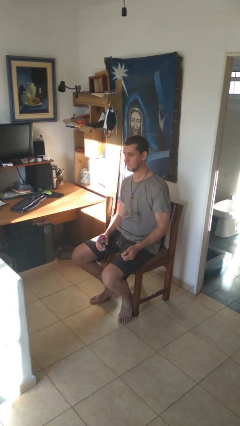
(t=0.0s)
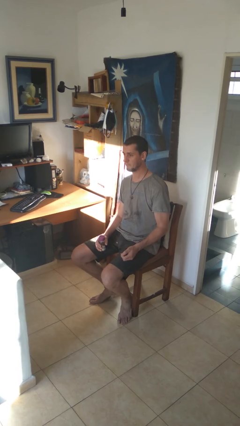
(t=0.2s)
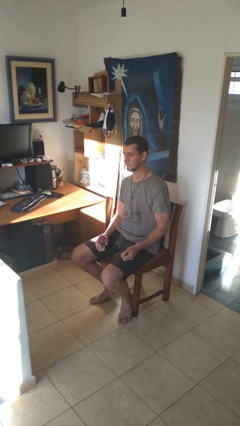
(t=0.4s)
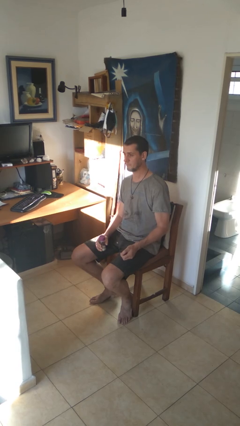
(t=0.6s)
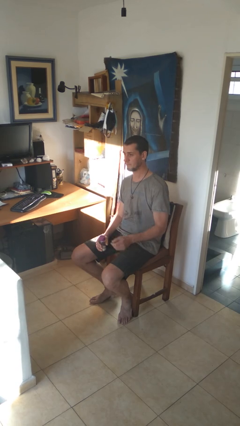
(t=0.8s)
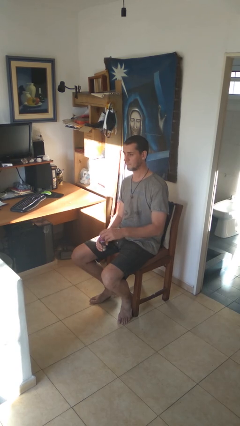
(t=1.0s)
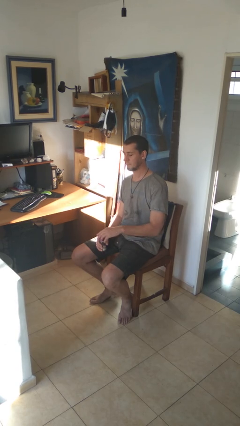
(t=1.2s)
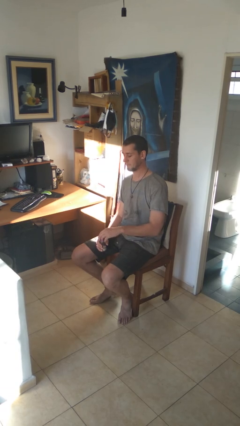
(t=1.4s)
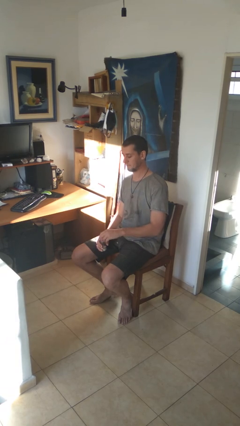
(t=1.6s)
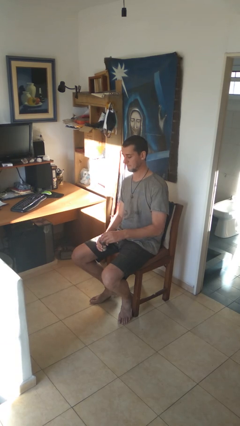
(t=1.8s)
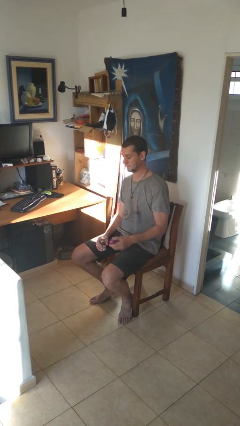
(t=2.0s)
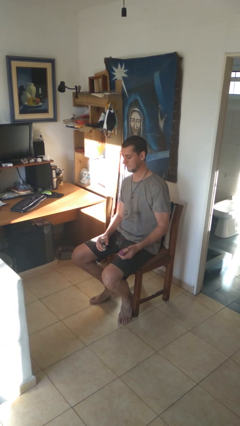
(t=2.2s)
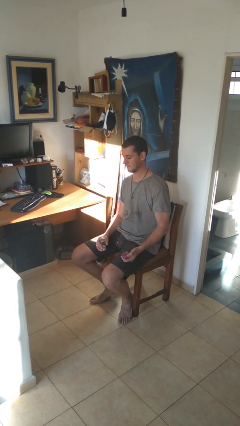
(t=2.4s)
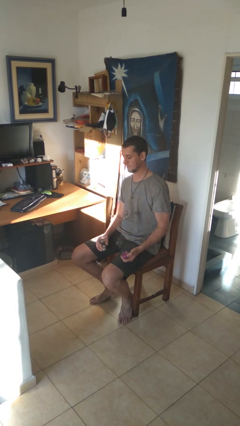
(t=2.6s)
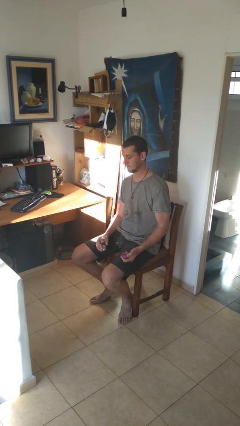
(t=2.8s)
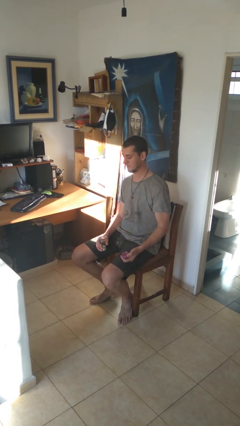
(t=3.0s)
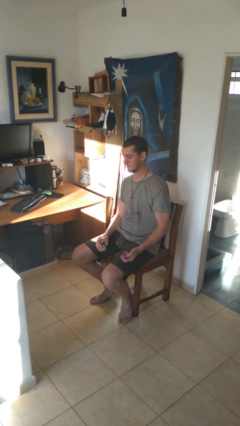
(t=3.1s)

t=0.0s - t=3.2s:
person opens jar

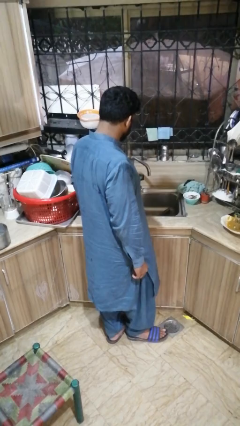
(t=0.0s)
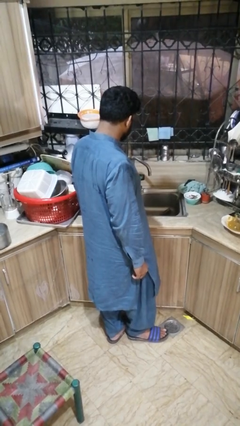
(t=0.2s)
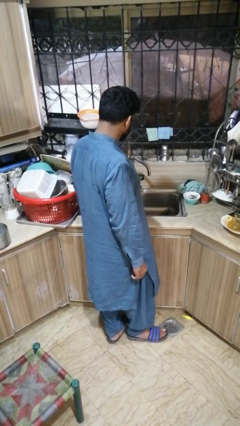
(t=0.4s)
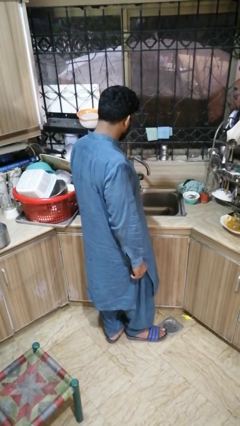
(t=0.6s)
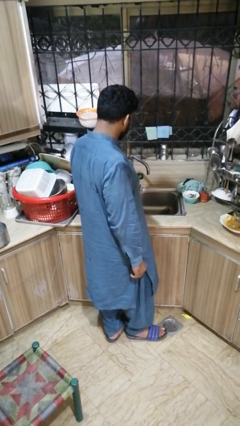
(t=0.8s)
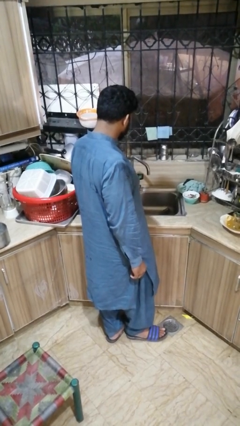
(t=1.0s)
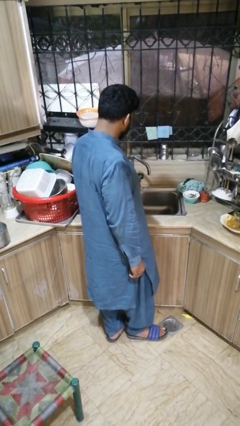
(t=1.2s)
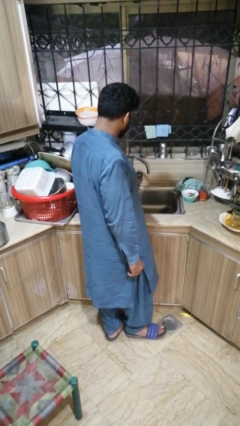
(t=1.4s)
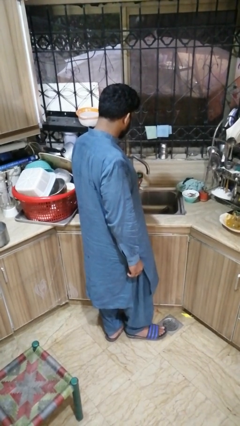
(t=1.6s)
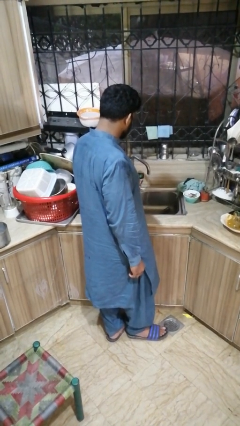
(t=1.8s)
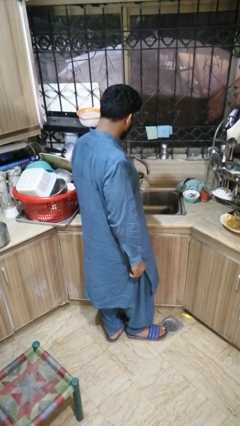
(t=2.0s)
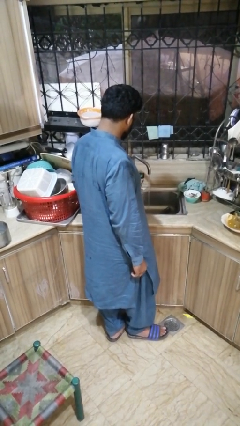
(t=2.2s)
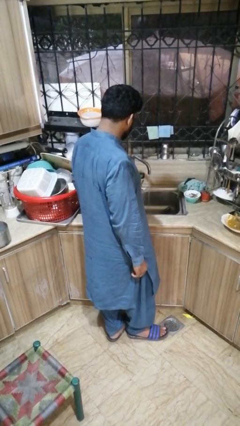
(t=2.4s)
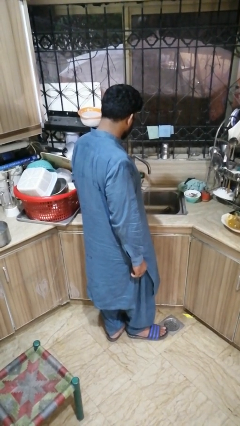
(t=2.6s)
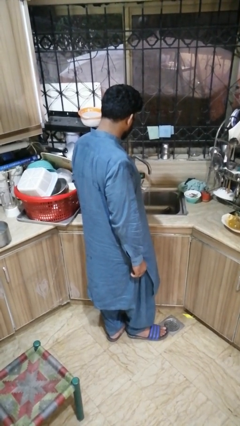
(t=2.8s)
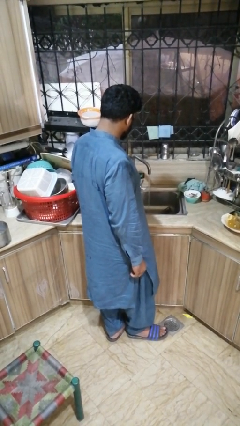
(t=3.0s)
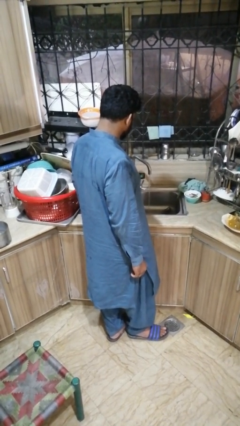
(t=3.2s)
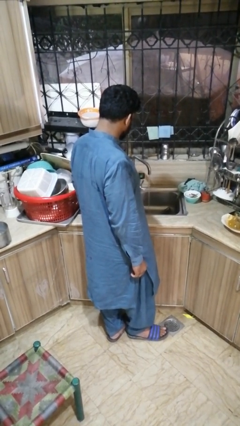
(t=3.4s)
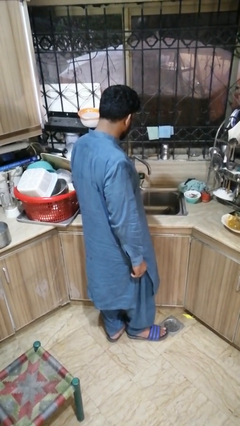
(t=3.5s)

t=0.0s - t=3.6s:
person turns on faucet

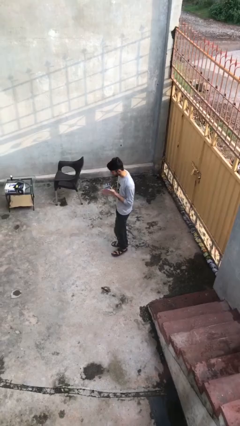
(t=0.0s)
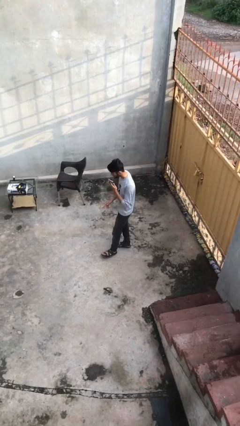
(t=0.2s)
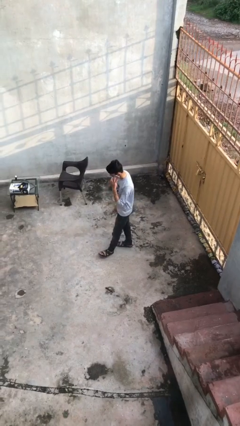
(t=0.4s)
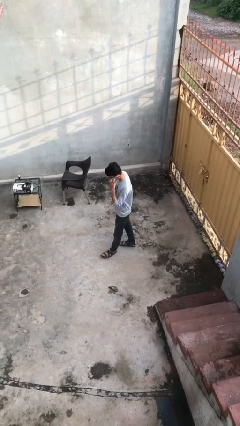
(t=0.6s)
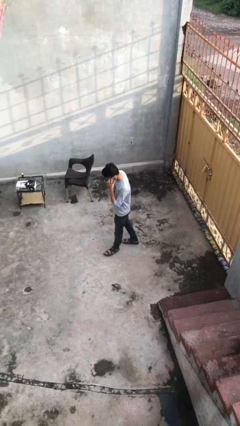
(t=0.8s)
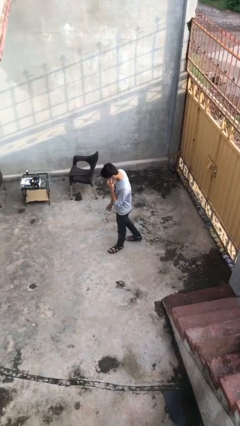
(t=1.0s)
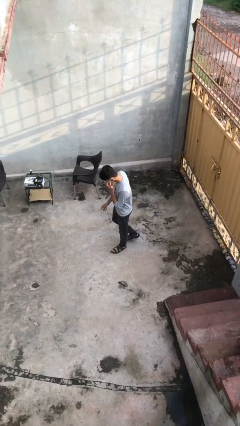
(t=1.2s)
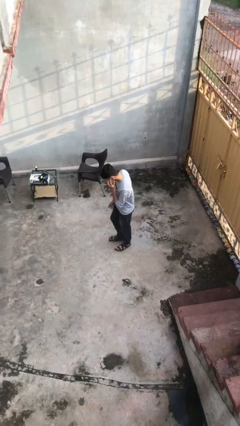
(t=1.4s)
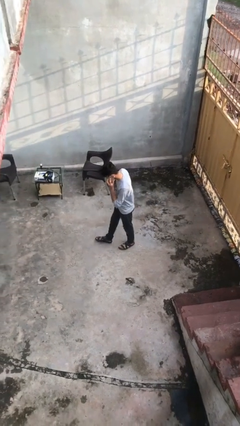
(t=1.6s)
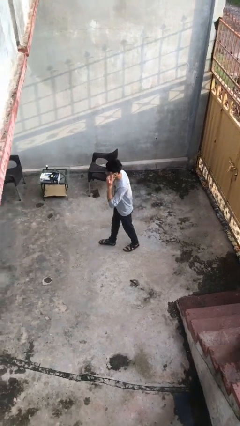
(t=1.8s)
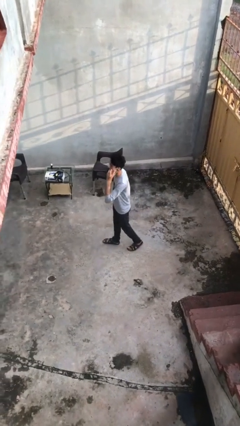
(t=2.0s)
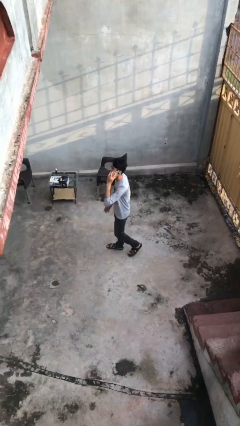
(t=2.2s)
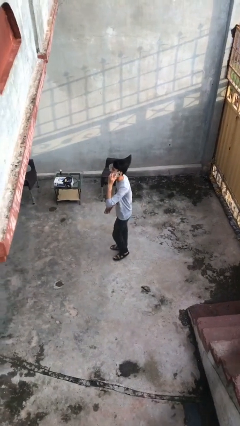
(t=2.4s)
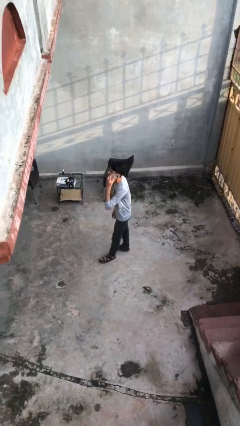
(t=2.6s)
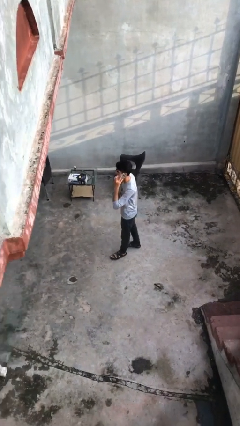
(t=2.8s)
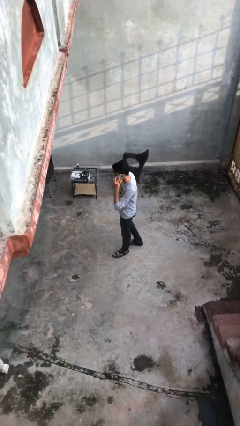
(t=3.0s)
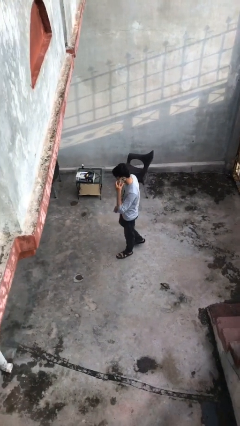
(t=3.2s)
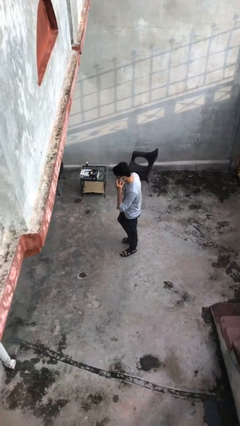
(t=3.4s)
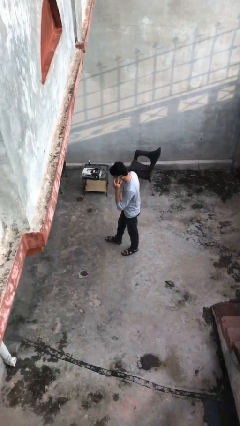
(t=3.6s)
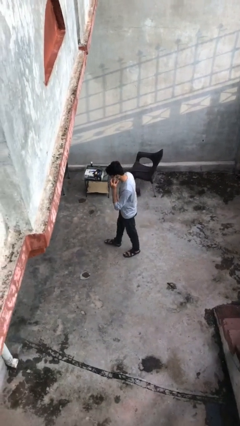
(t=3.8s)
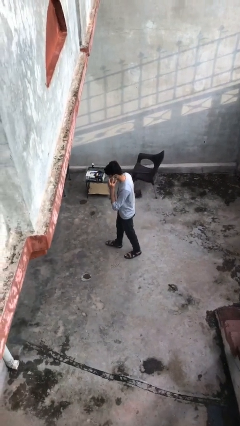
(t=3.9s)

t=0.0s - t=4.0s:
person talks on phone

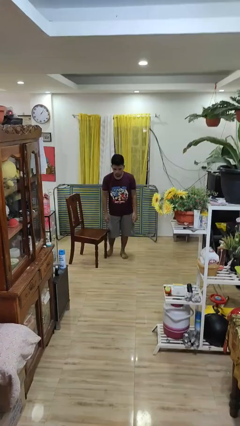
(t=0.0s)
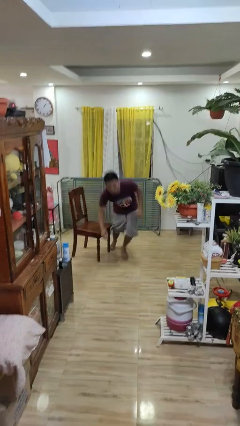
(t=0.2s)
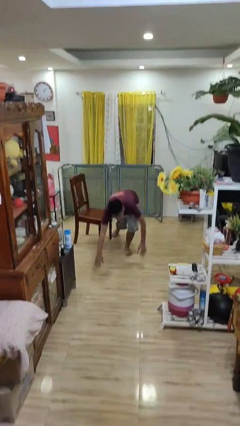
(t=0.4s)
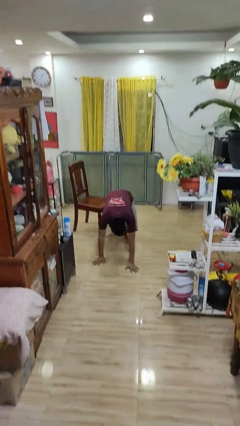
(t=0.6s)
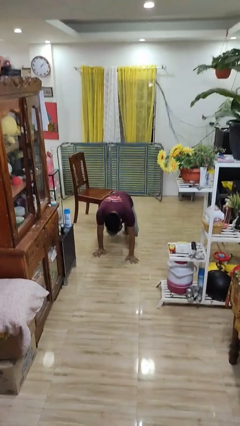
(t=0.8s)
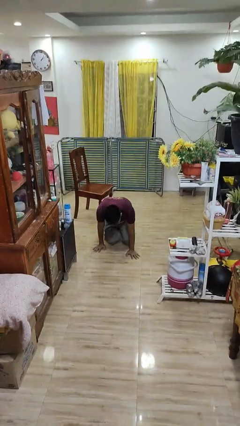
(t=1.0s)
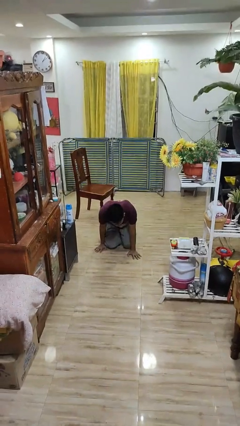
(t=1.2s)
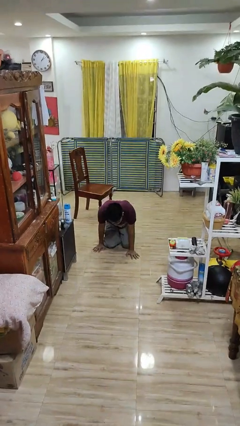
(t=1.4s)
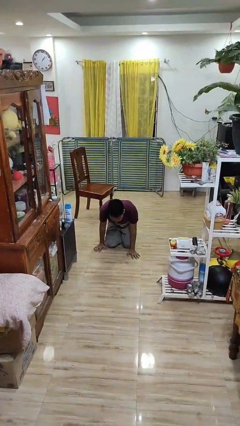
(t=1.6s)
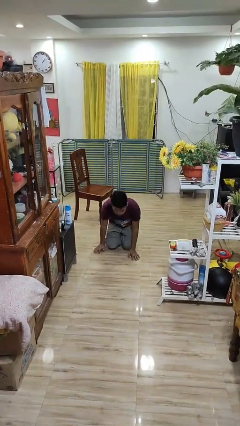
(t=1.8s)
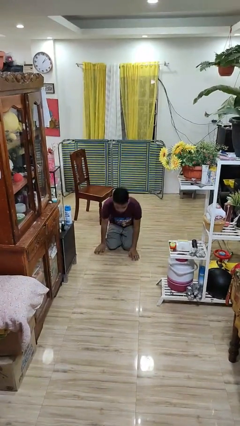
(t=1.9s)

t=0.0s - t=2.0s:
person trips on object on floor

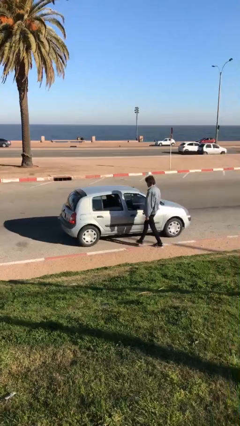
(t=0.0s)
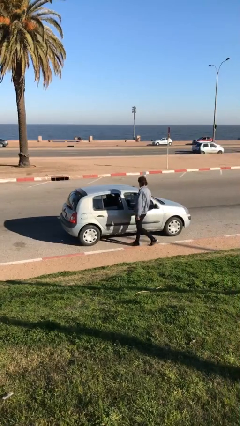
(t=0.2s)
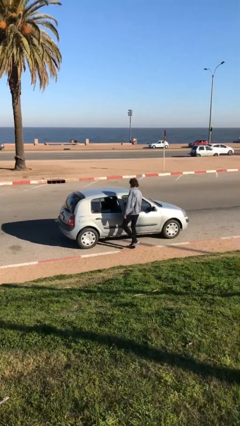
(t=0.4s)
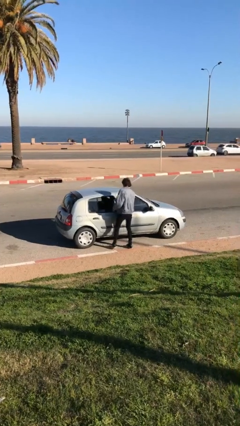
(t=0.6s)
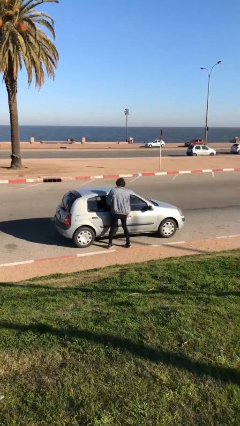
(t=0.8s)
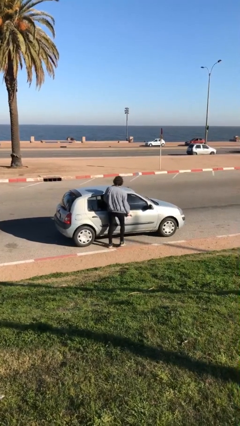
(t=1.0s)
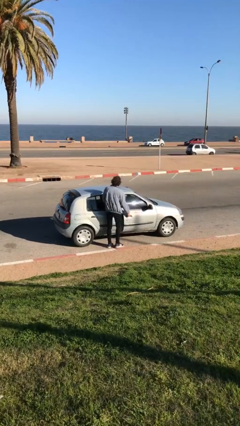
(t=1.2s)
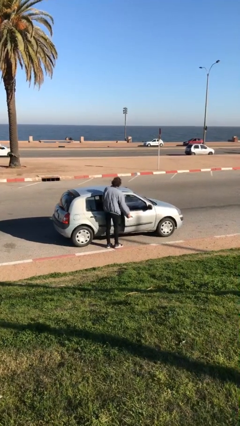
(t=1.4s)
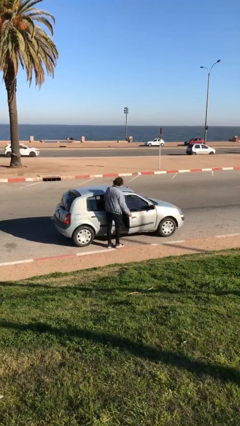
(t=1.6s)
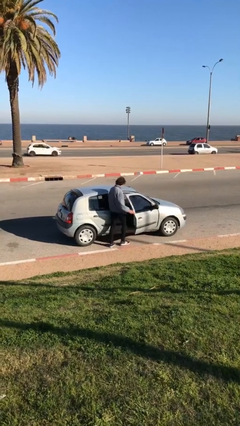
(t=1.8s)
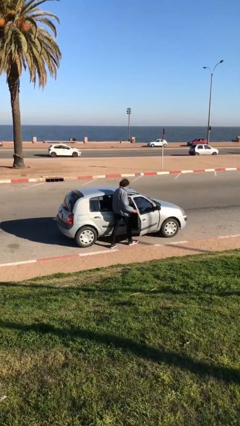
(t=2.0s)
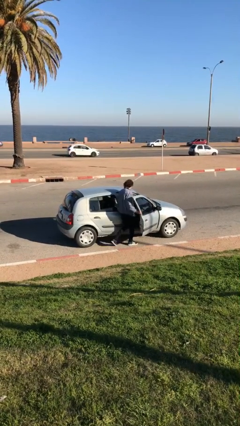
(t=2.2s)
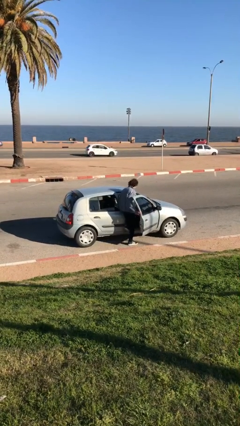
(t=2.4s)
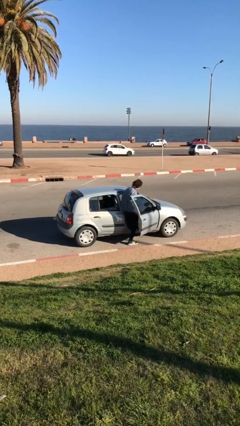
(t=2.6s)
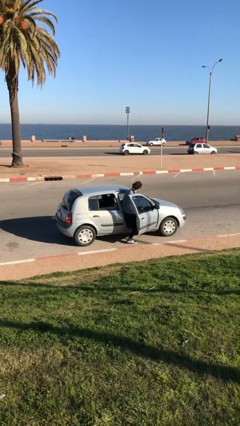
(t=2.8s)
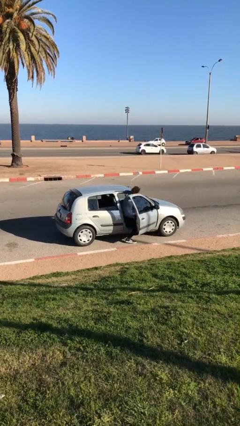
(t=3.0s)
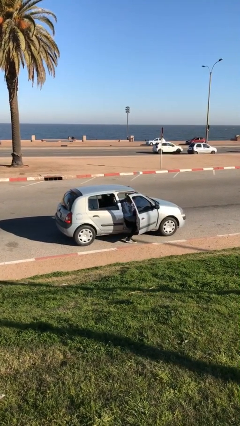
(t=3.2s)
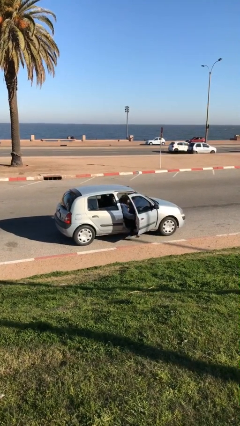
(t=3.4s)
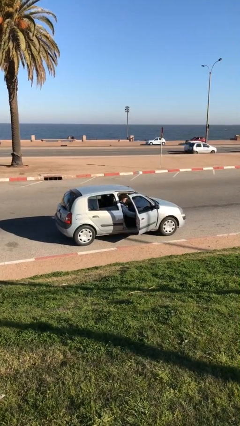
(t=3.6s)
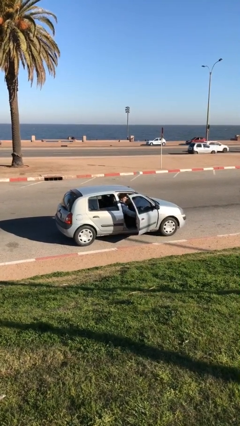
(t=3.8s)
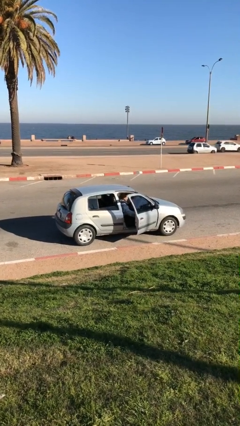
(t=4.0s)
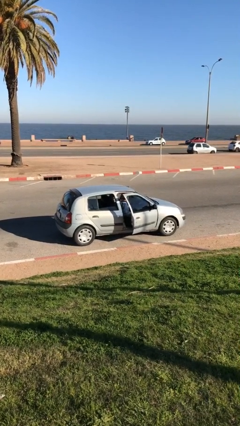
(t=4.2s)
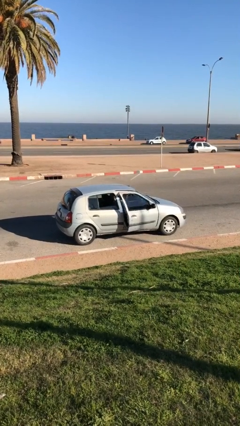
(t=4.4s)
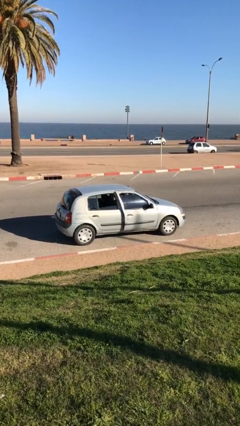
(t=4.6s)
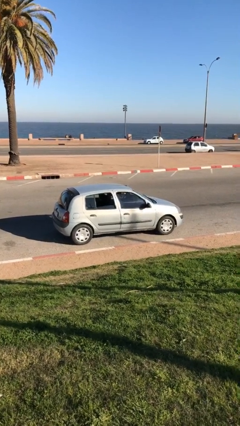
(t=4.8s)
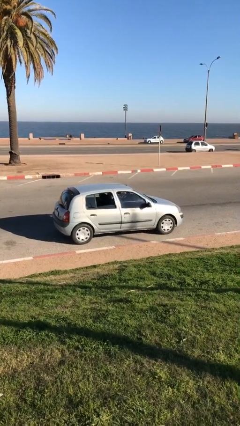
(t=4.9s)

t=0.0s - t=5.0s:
car picks up person
